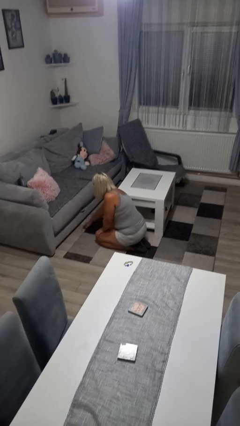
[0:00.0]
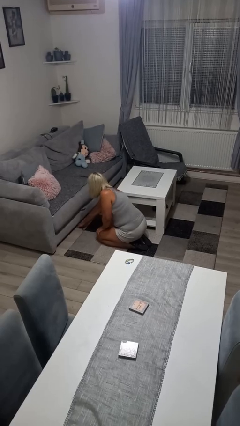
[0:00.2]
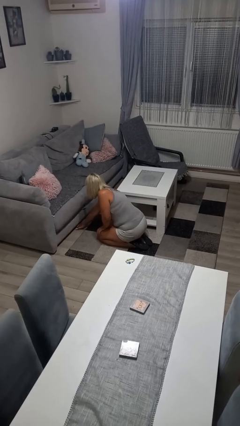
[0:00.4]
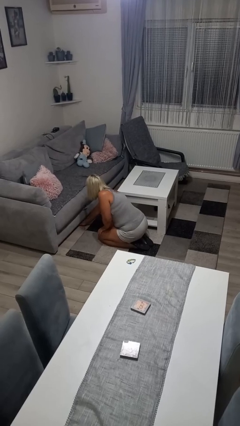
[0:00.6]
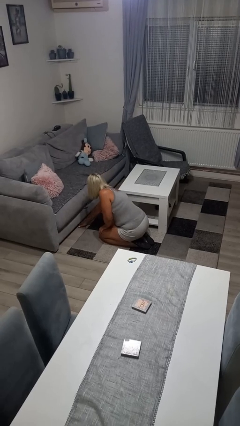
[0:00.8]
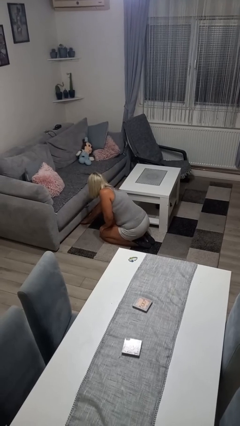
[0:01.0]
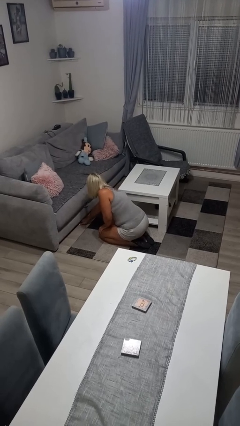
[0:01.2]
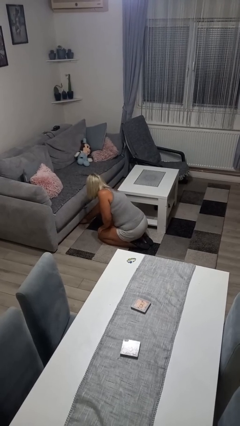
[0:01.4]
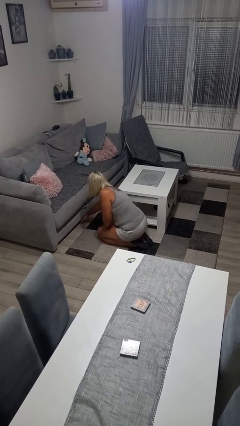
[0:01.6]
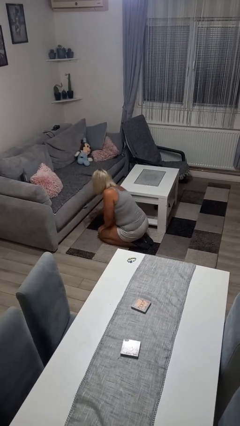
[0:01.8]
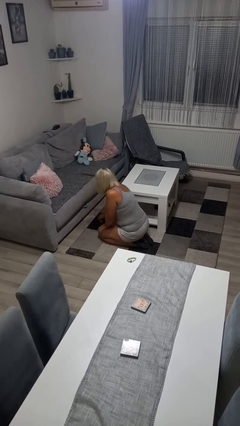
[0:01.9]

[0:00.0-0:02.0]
person searches under couch

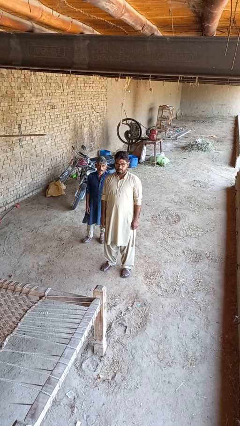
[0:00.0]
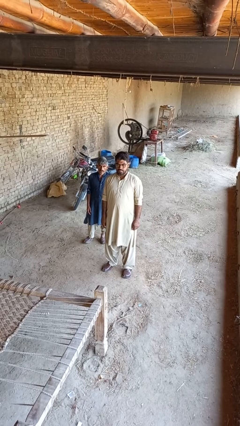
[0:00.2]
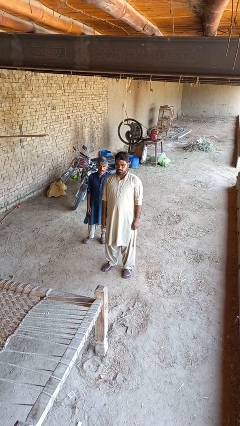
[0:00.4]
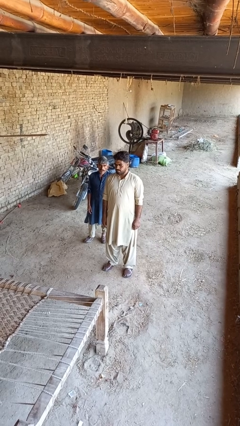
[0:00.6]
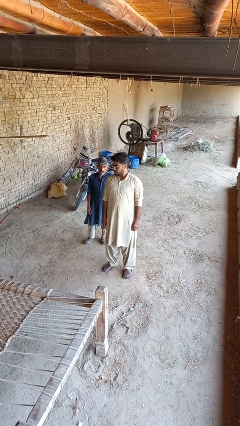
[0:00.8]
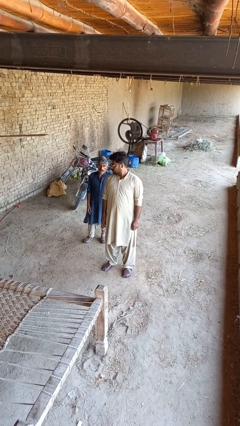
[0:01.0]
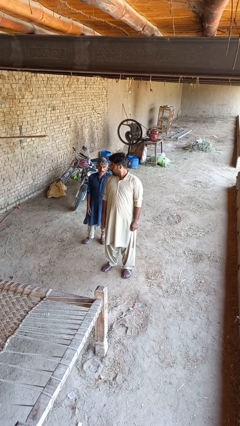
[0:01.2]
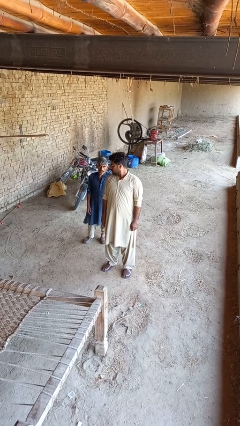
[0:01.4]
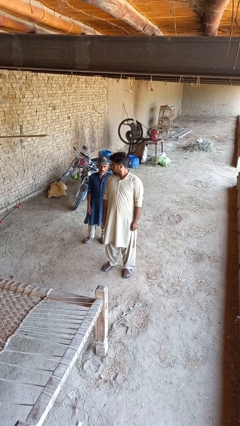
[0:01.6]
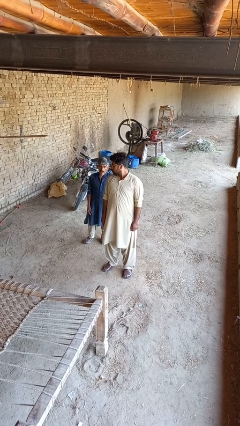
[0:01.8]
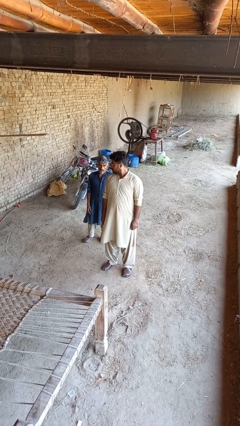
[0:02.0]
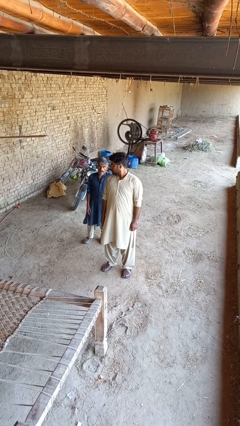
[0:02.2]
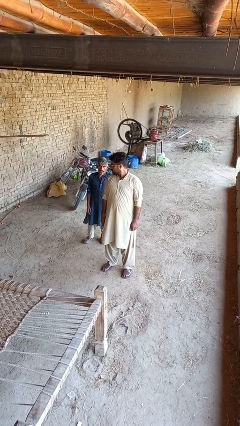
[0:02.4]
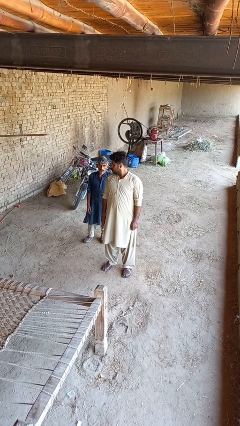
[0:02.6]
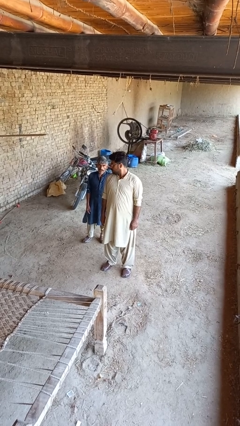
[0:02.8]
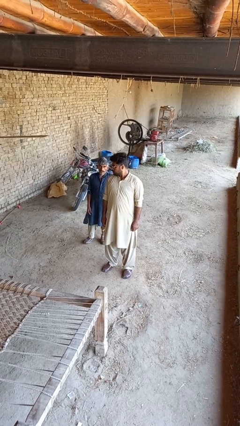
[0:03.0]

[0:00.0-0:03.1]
person looks over shoulder

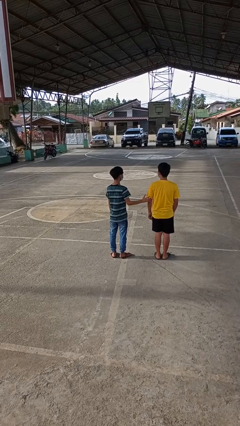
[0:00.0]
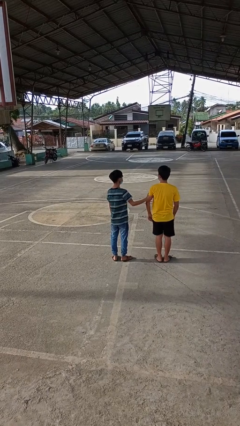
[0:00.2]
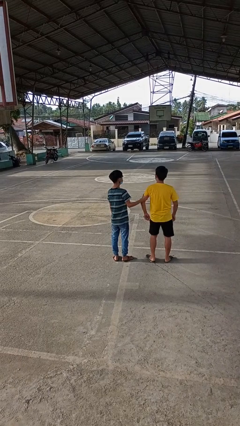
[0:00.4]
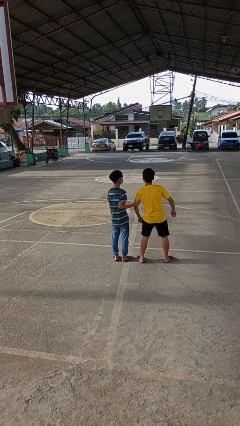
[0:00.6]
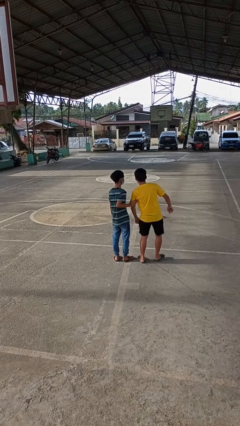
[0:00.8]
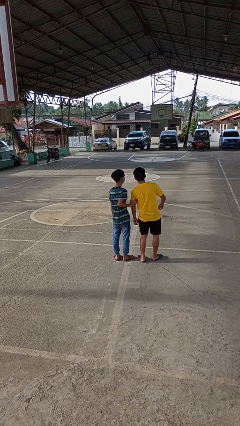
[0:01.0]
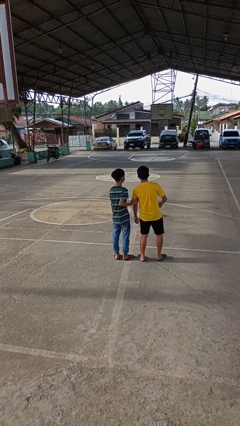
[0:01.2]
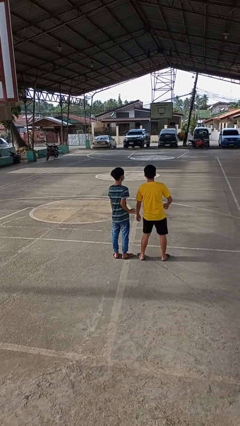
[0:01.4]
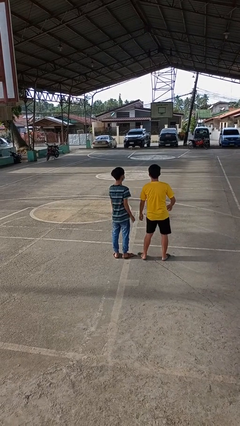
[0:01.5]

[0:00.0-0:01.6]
person grabs person by bicep

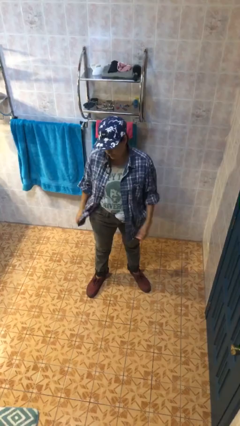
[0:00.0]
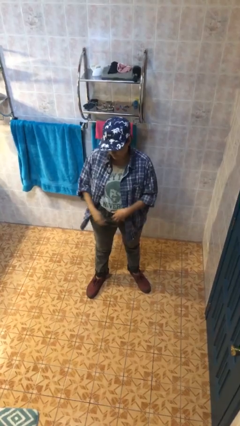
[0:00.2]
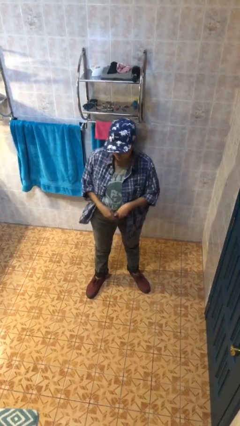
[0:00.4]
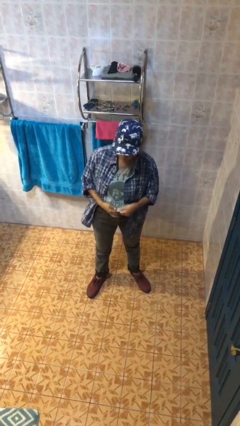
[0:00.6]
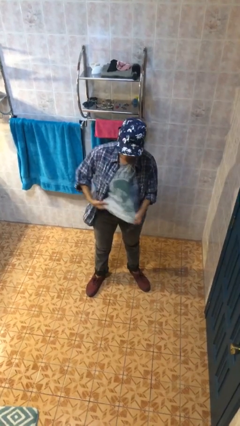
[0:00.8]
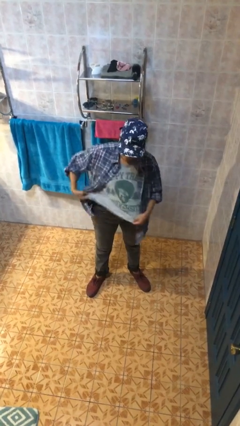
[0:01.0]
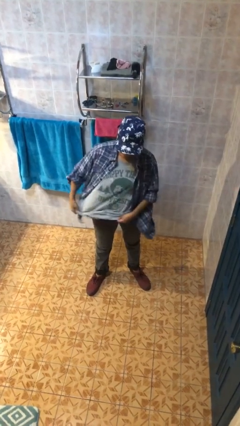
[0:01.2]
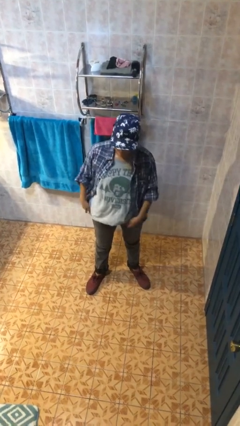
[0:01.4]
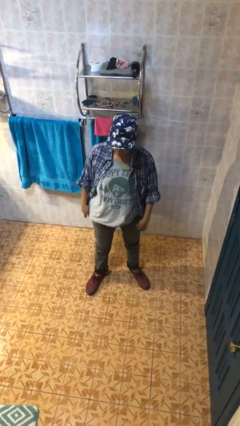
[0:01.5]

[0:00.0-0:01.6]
person untucks shirt

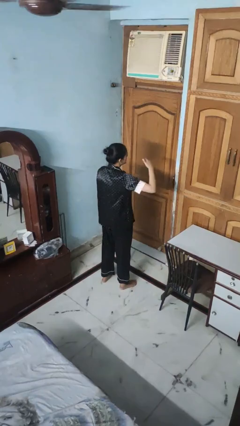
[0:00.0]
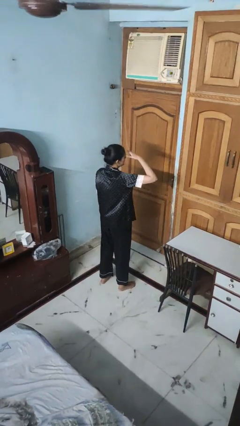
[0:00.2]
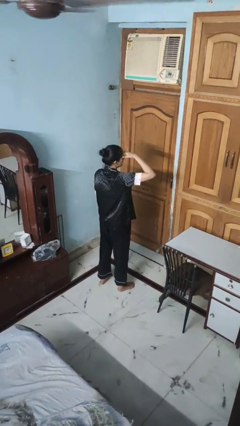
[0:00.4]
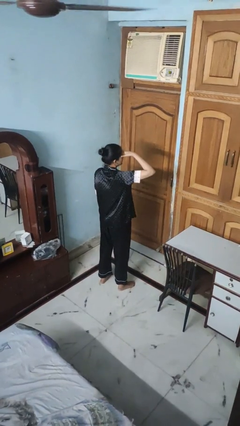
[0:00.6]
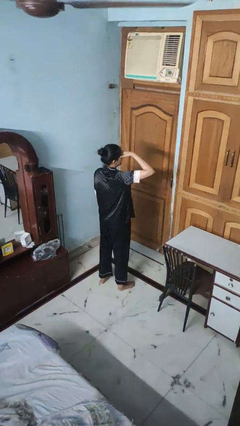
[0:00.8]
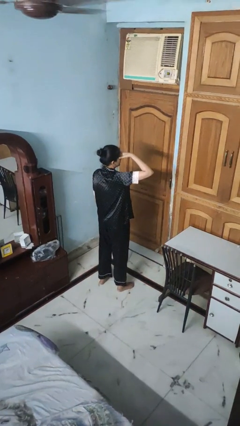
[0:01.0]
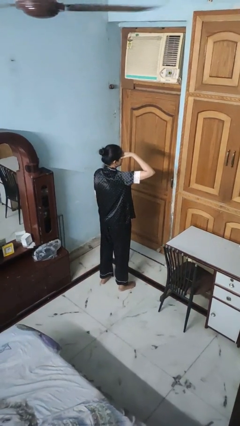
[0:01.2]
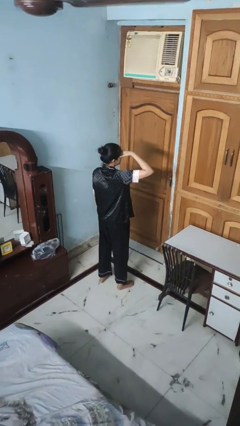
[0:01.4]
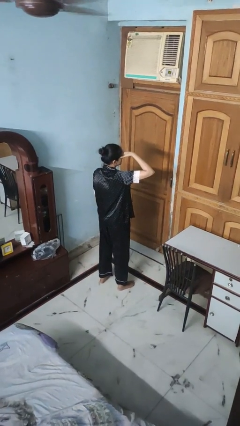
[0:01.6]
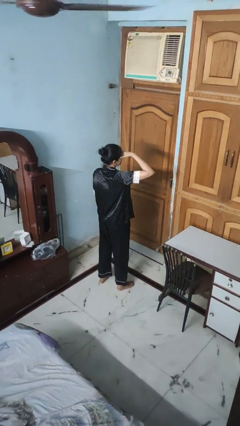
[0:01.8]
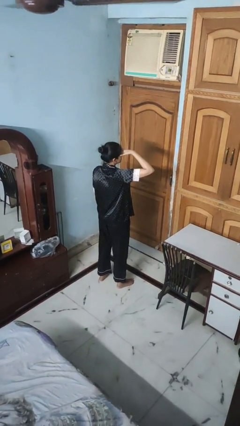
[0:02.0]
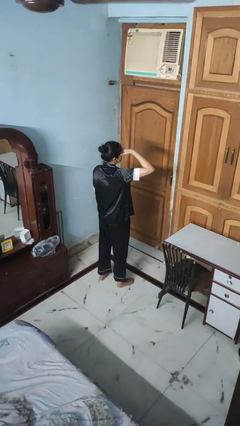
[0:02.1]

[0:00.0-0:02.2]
person shades eyes

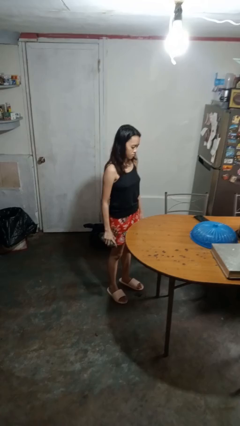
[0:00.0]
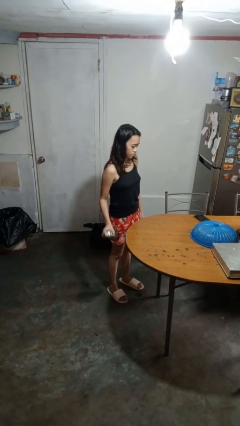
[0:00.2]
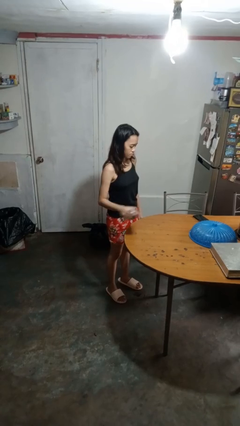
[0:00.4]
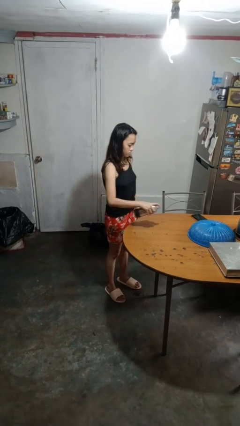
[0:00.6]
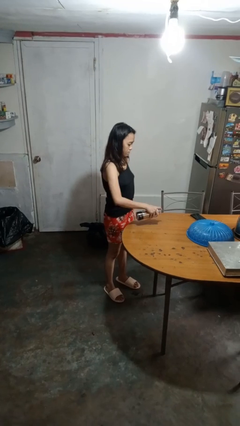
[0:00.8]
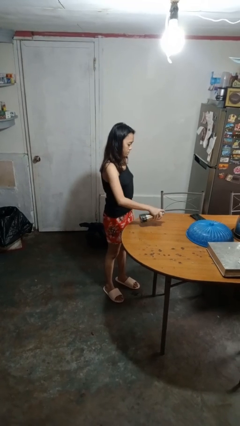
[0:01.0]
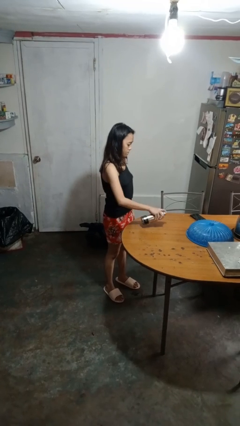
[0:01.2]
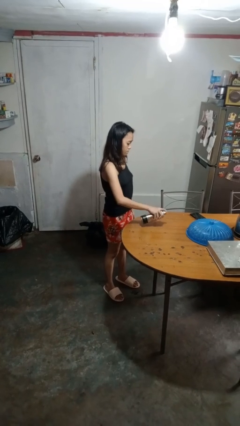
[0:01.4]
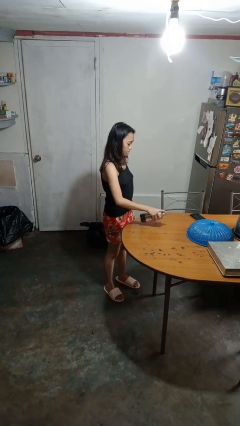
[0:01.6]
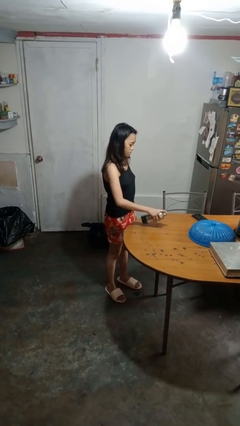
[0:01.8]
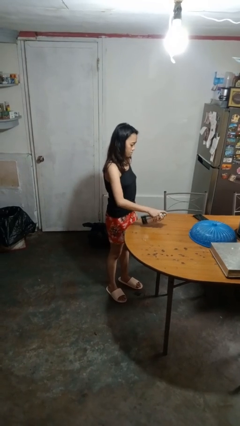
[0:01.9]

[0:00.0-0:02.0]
person sprays from bottle

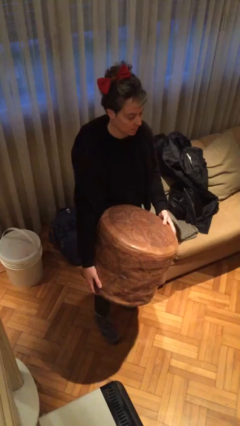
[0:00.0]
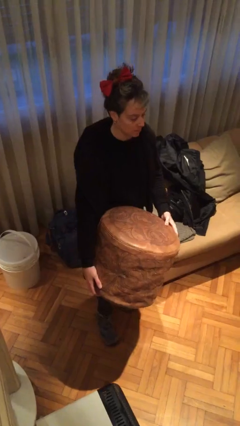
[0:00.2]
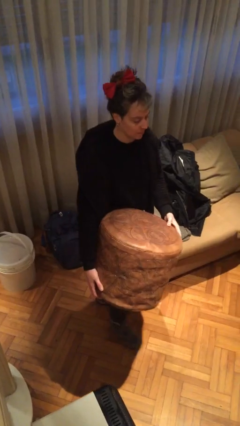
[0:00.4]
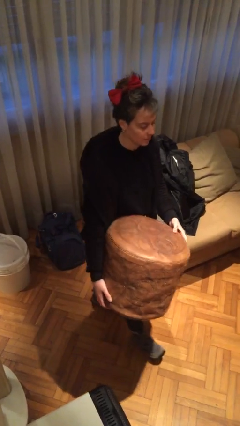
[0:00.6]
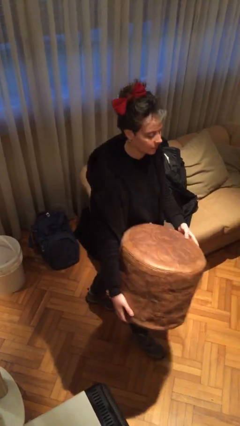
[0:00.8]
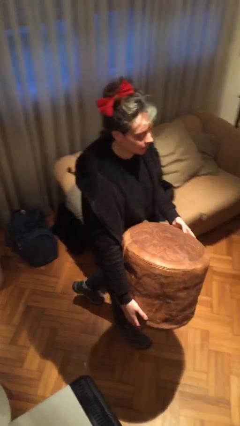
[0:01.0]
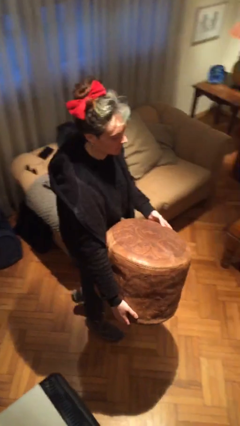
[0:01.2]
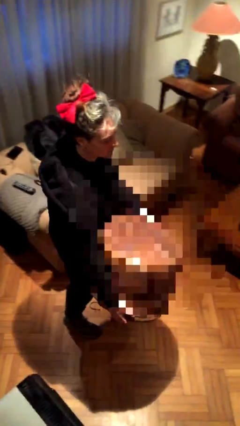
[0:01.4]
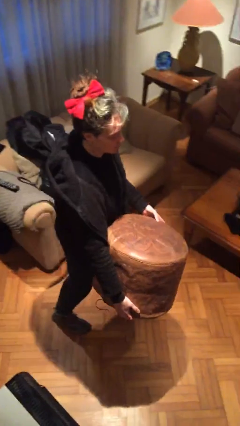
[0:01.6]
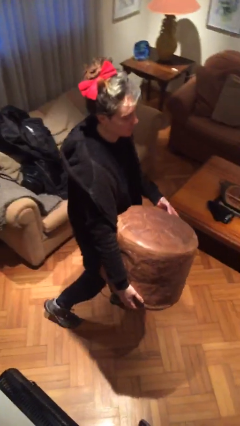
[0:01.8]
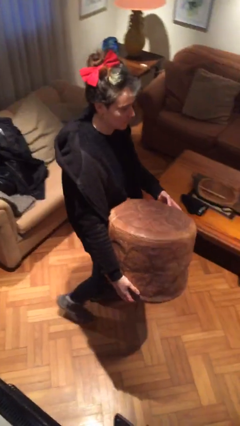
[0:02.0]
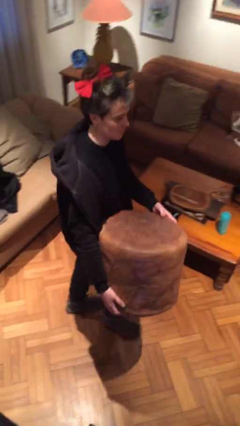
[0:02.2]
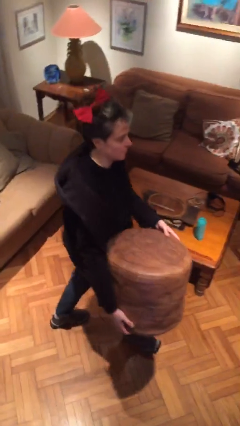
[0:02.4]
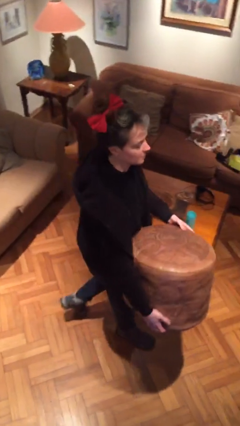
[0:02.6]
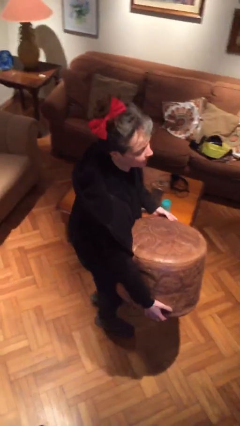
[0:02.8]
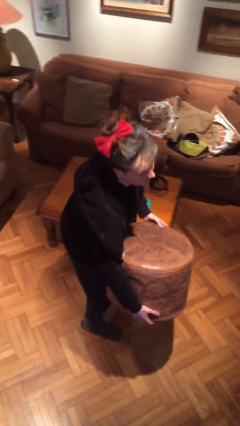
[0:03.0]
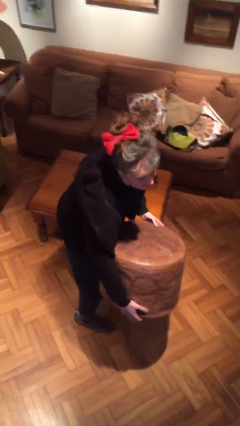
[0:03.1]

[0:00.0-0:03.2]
person carries heavy object

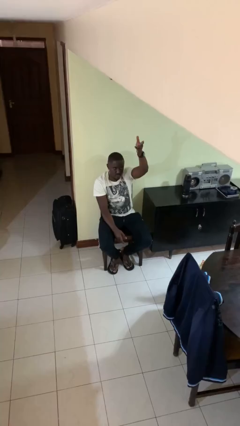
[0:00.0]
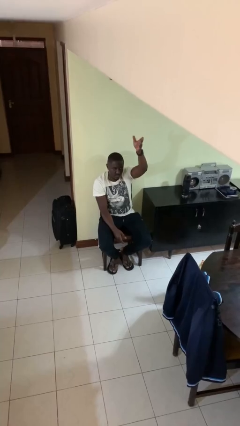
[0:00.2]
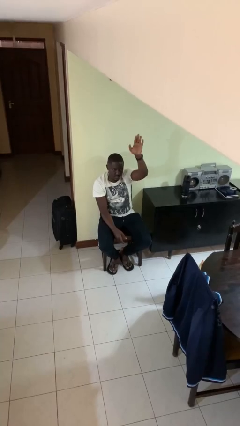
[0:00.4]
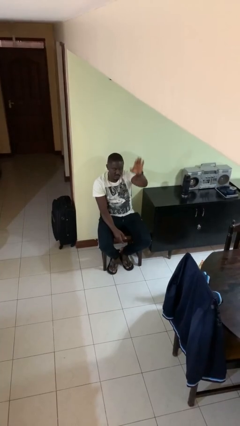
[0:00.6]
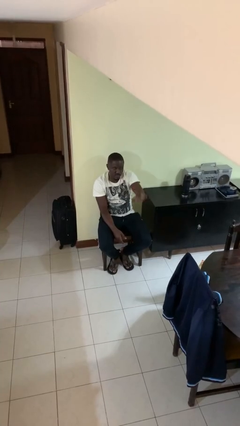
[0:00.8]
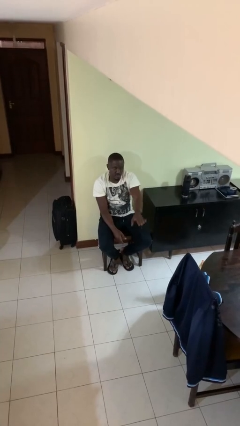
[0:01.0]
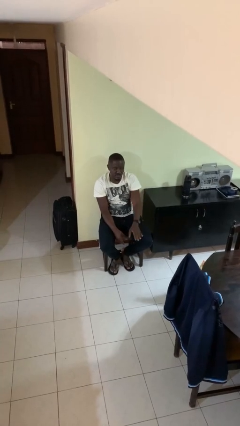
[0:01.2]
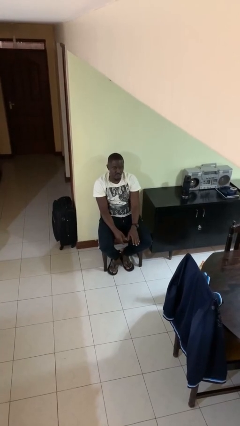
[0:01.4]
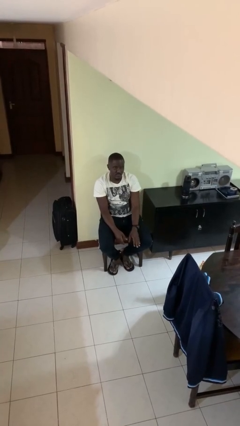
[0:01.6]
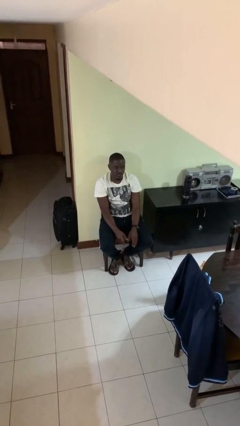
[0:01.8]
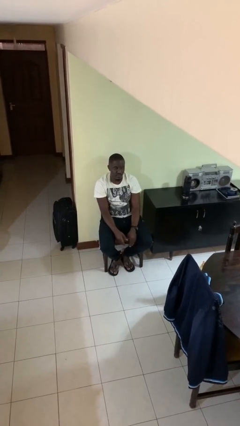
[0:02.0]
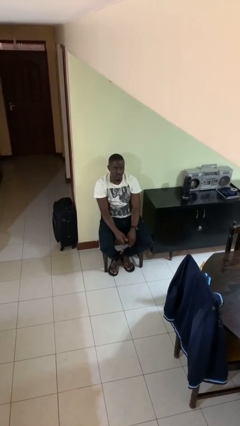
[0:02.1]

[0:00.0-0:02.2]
person gestures swipe down
